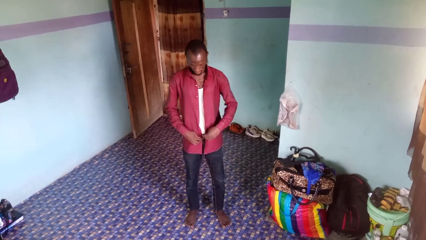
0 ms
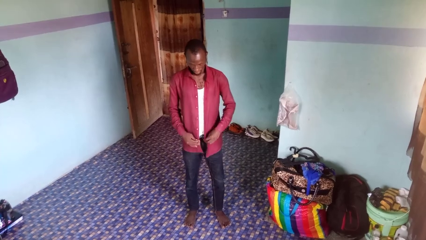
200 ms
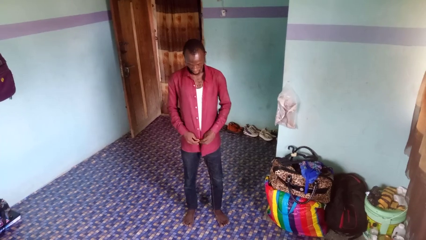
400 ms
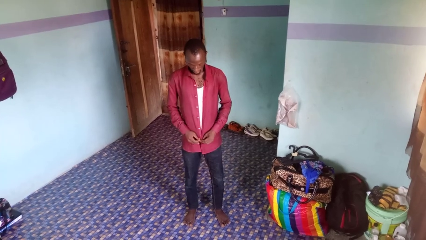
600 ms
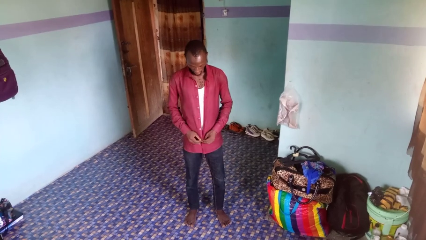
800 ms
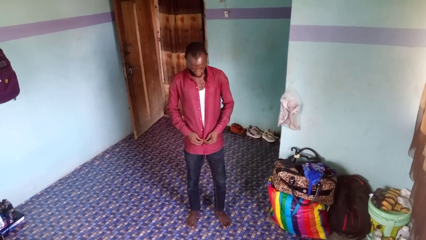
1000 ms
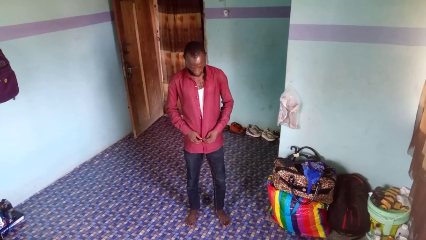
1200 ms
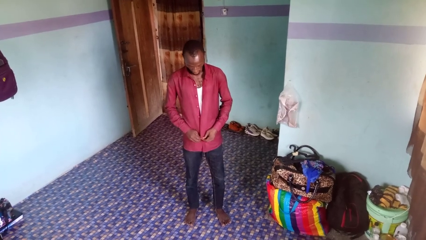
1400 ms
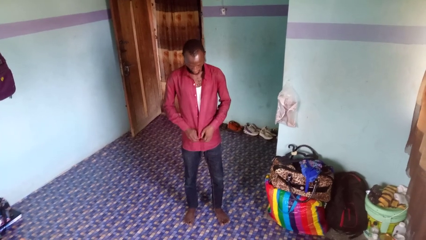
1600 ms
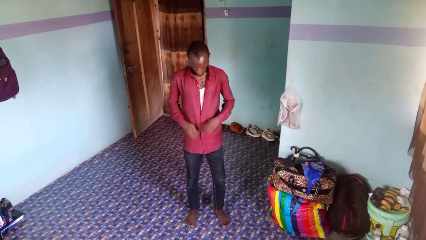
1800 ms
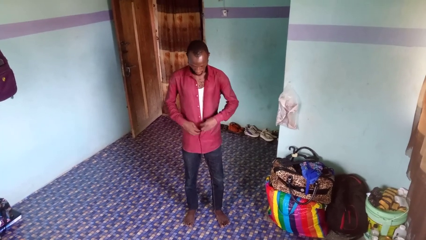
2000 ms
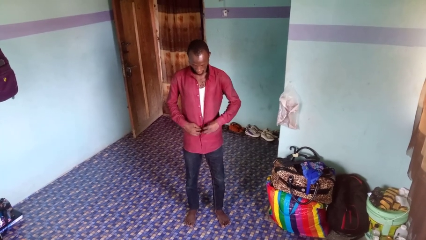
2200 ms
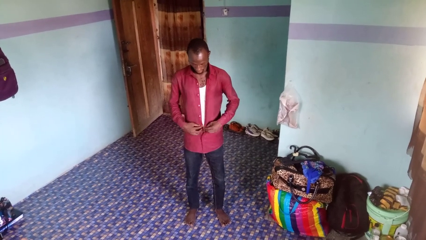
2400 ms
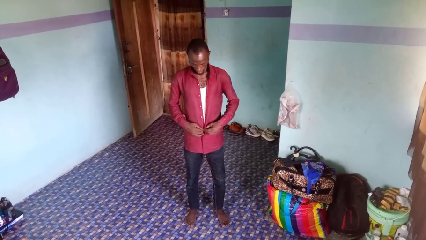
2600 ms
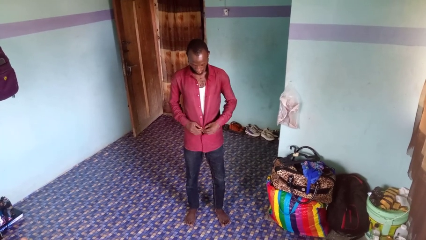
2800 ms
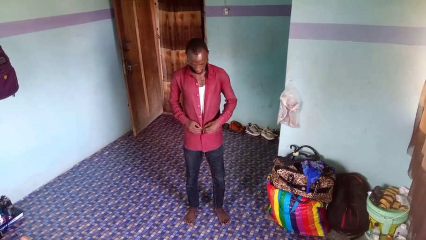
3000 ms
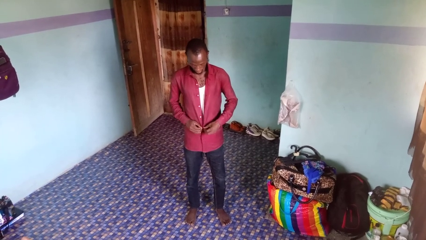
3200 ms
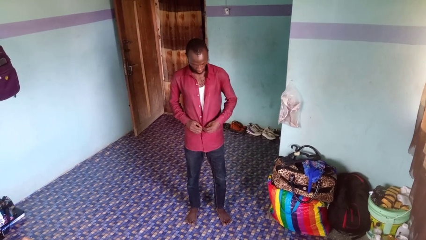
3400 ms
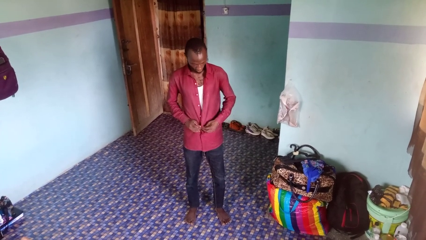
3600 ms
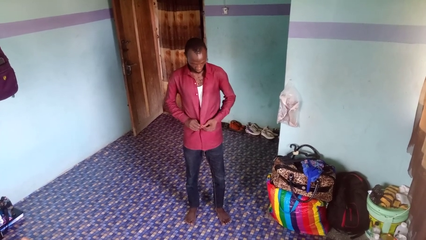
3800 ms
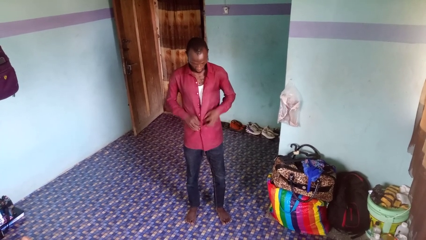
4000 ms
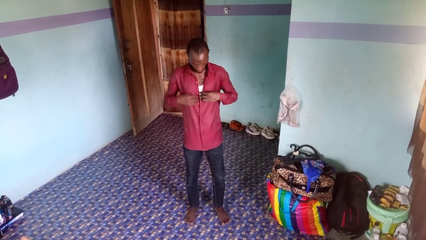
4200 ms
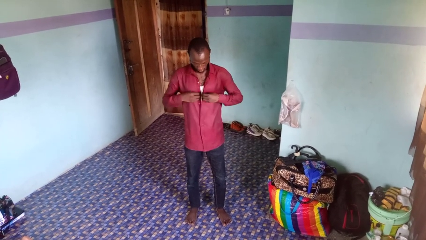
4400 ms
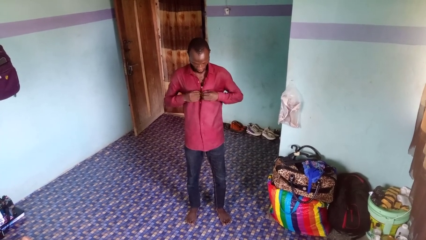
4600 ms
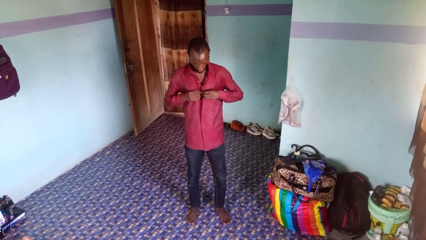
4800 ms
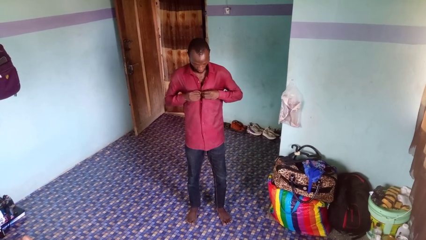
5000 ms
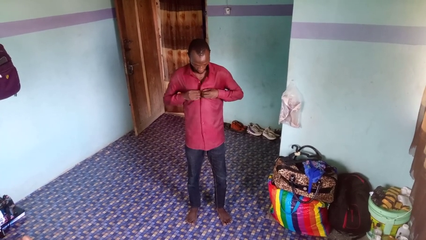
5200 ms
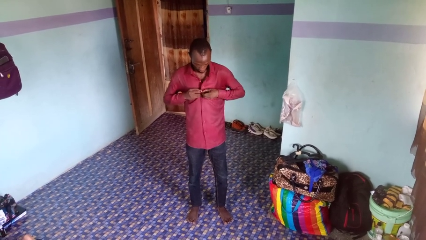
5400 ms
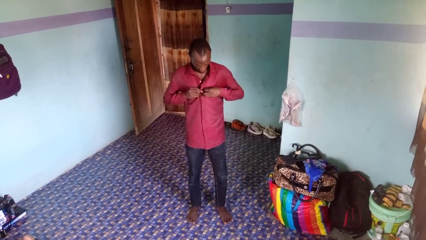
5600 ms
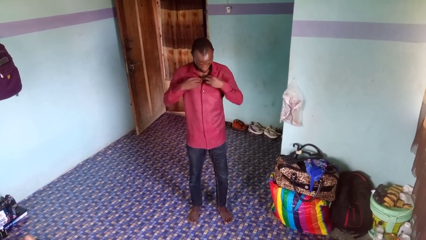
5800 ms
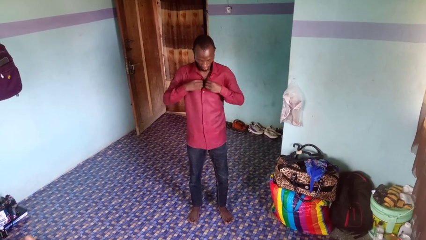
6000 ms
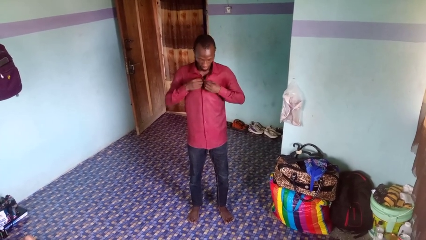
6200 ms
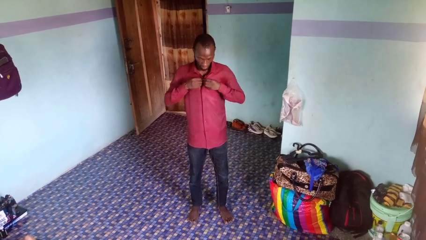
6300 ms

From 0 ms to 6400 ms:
person buttons shirt

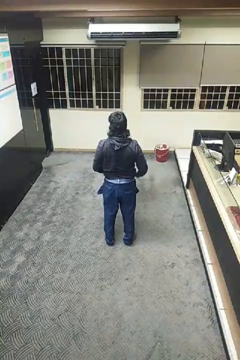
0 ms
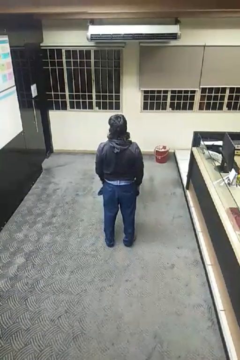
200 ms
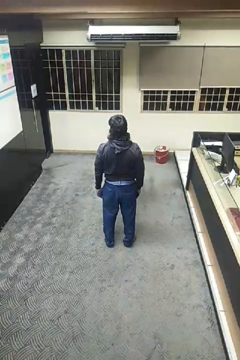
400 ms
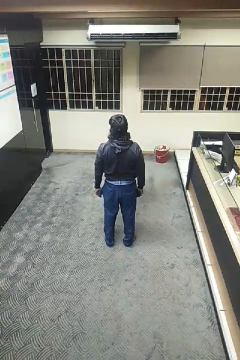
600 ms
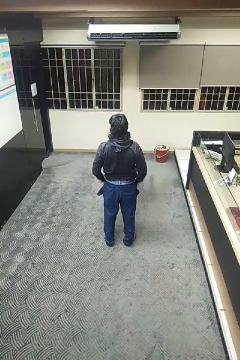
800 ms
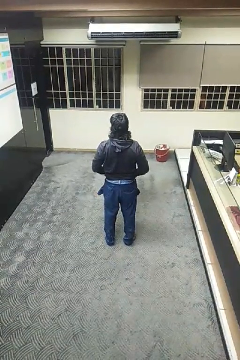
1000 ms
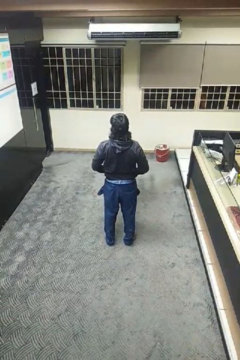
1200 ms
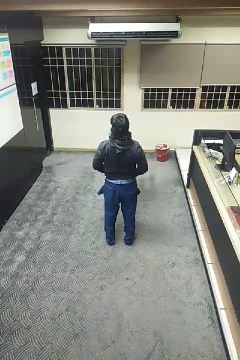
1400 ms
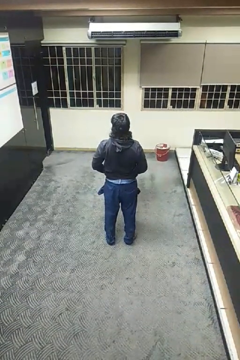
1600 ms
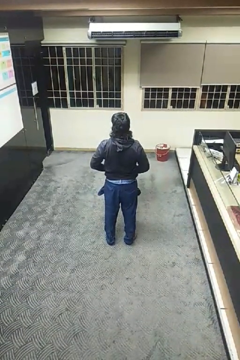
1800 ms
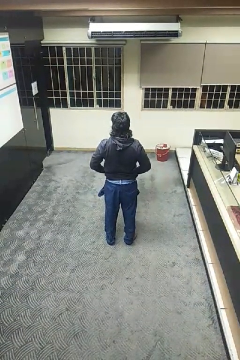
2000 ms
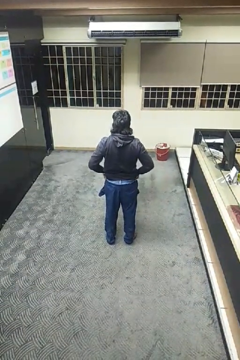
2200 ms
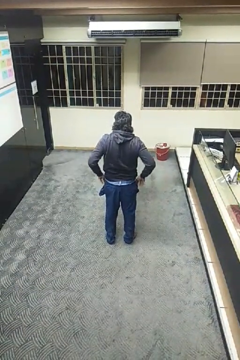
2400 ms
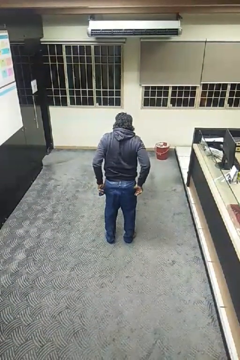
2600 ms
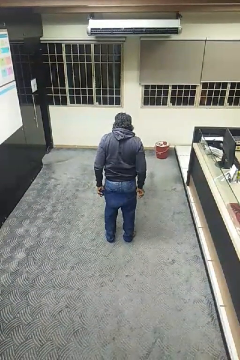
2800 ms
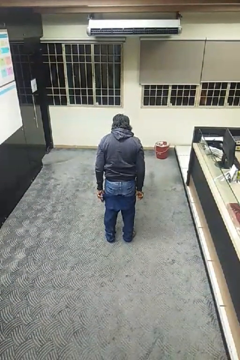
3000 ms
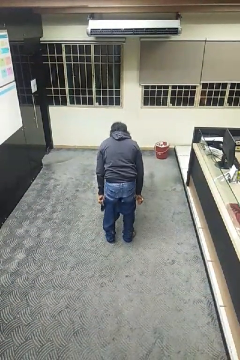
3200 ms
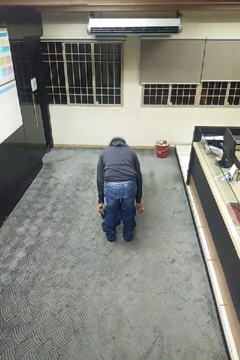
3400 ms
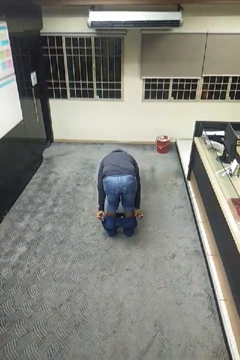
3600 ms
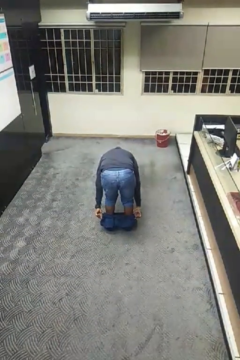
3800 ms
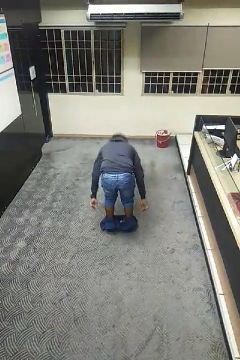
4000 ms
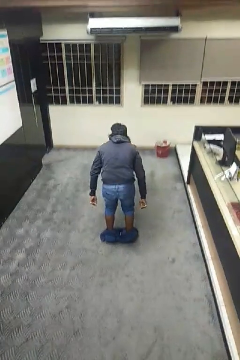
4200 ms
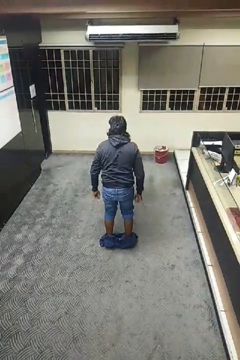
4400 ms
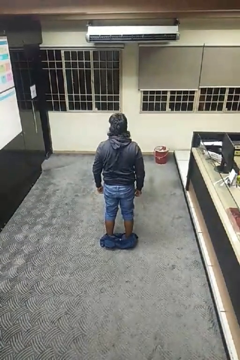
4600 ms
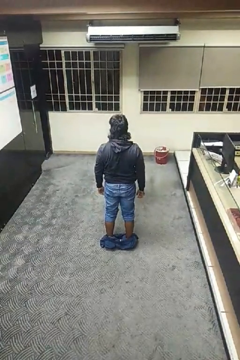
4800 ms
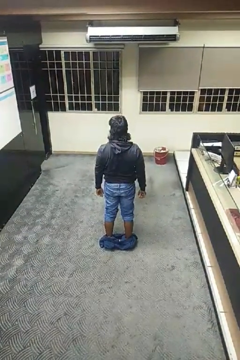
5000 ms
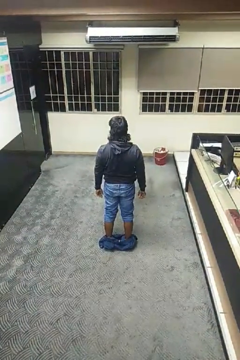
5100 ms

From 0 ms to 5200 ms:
person takes off pants

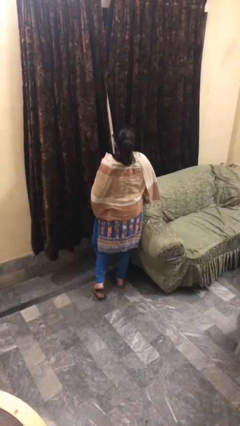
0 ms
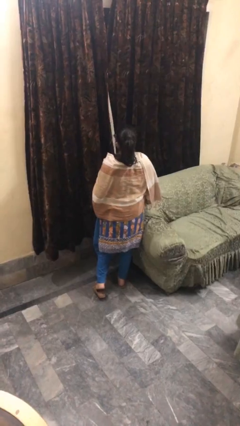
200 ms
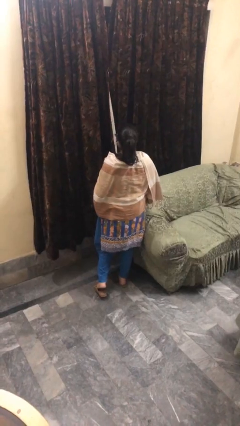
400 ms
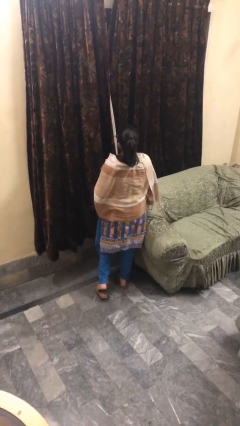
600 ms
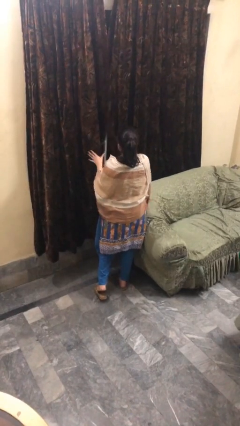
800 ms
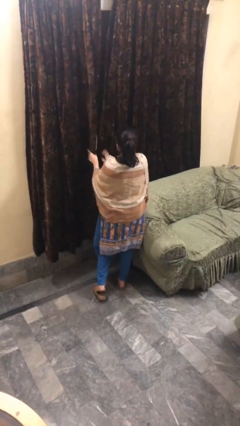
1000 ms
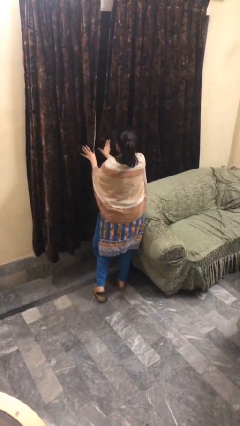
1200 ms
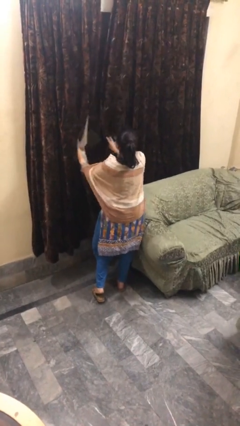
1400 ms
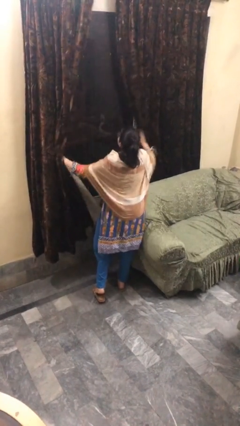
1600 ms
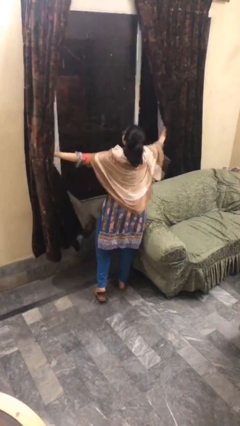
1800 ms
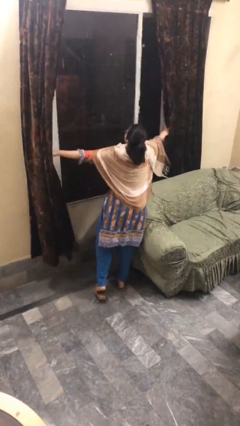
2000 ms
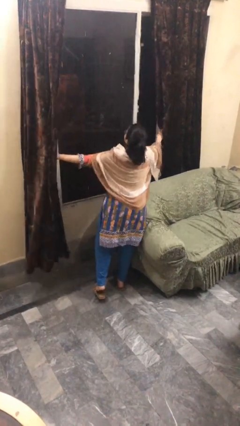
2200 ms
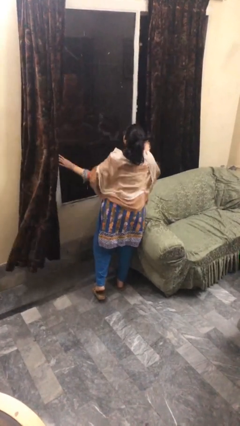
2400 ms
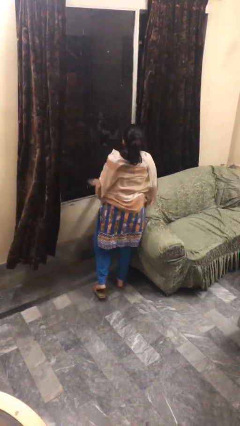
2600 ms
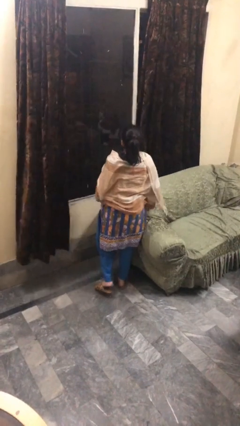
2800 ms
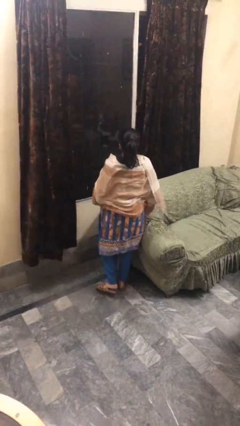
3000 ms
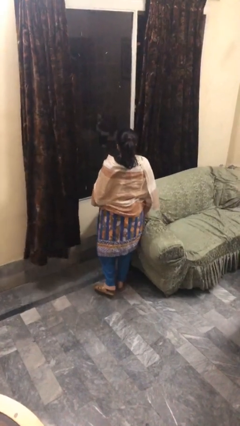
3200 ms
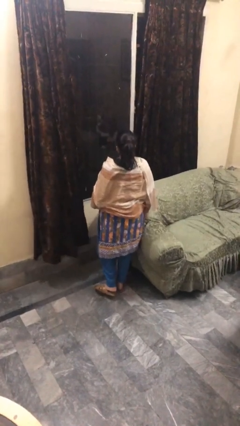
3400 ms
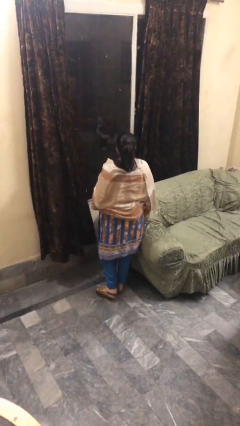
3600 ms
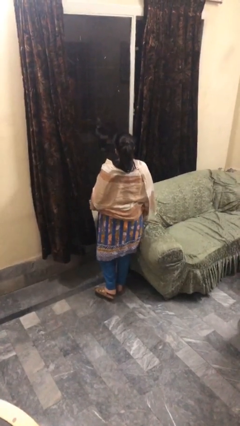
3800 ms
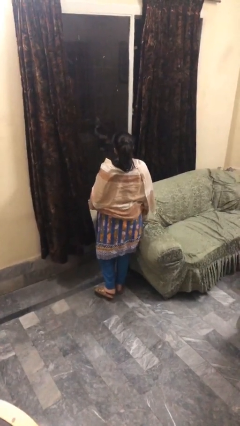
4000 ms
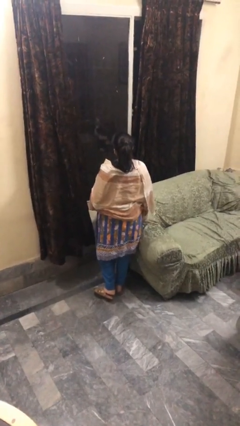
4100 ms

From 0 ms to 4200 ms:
person opens curtains

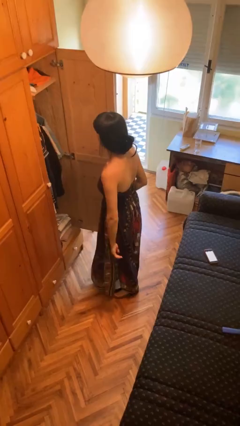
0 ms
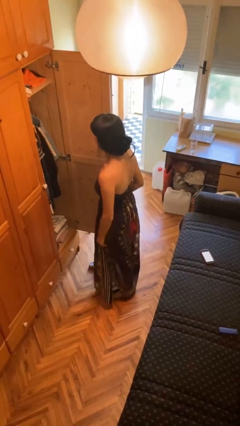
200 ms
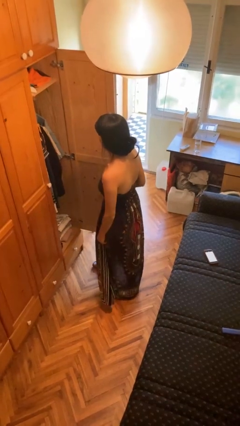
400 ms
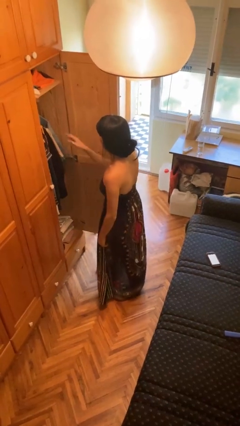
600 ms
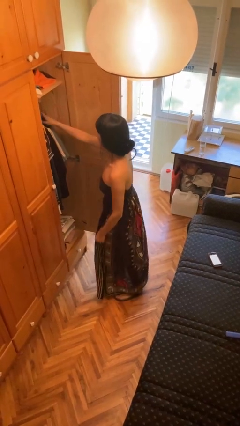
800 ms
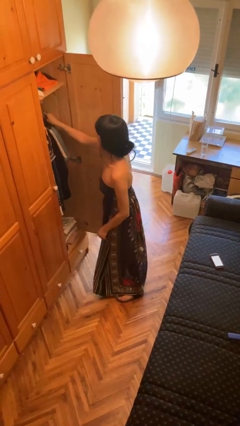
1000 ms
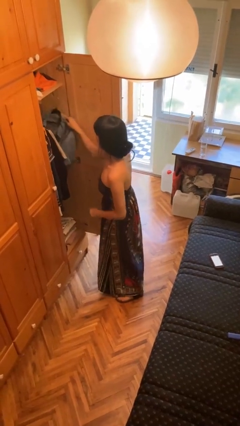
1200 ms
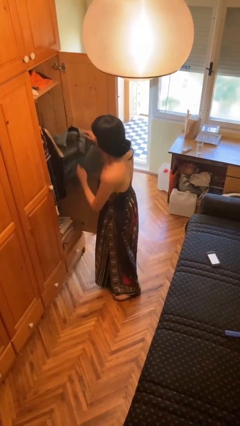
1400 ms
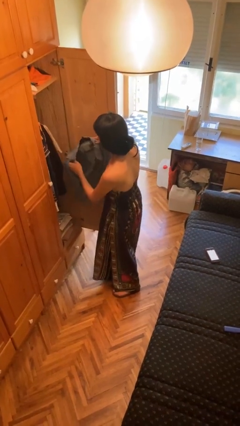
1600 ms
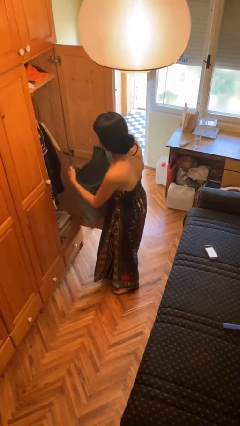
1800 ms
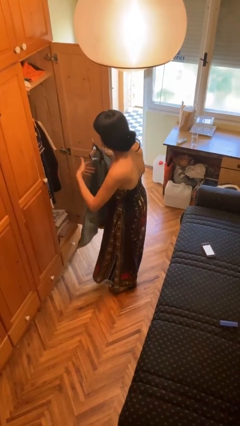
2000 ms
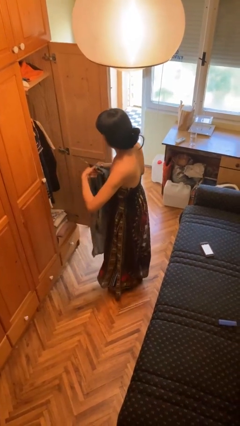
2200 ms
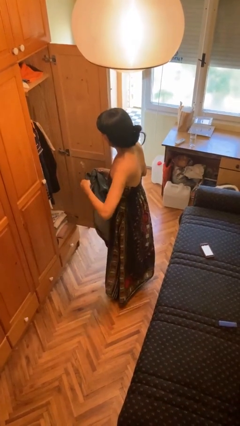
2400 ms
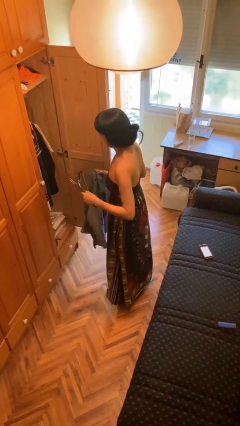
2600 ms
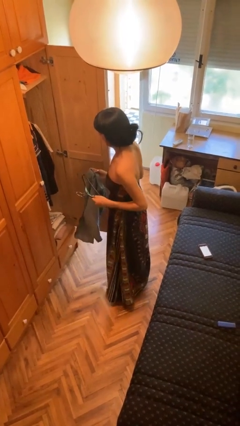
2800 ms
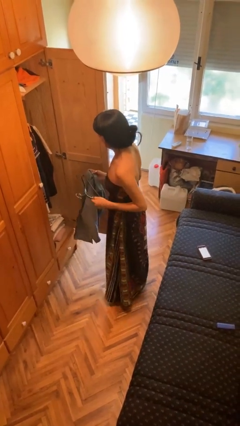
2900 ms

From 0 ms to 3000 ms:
person takes clothes from closet
